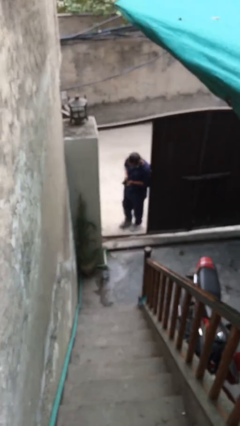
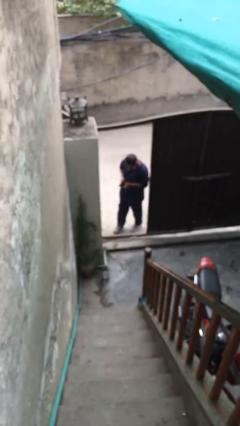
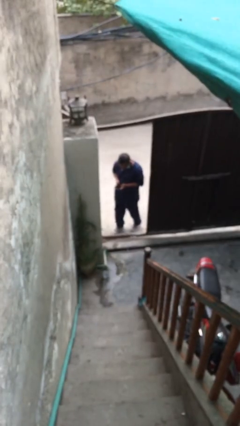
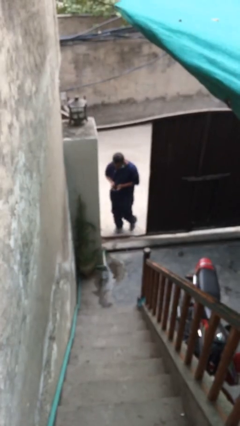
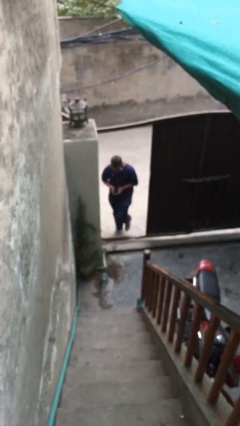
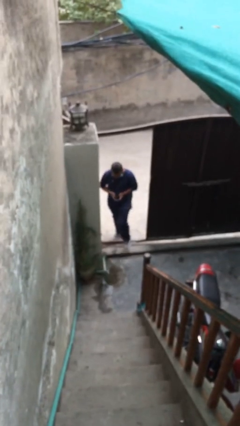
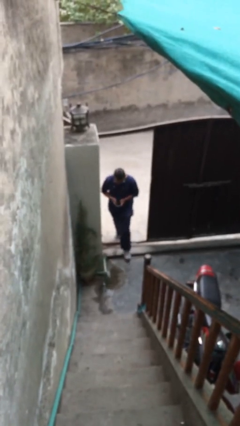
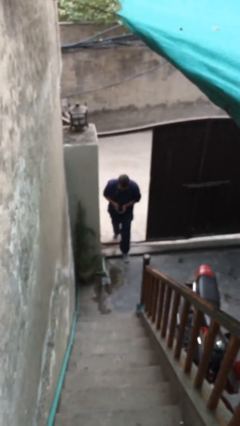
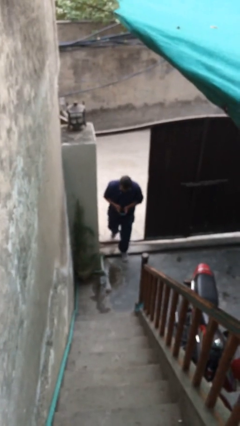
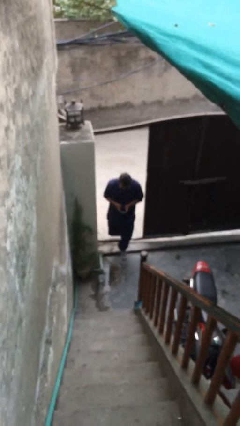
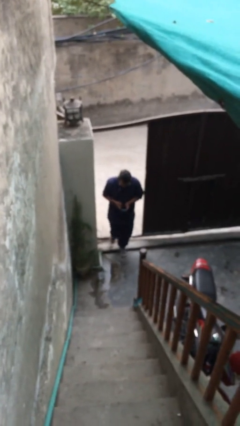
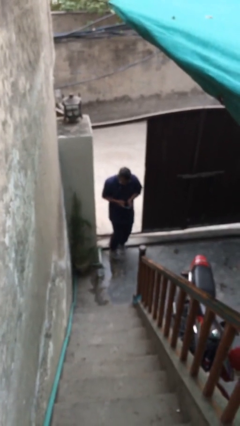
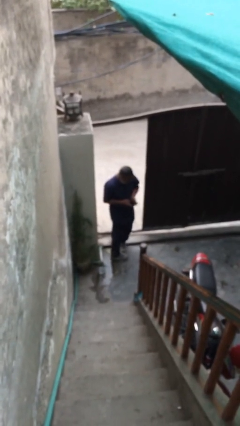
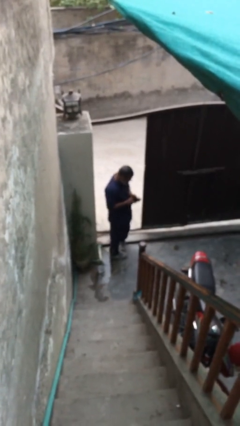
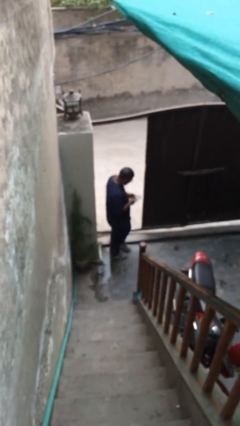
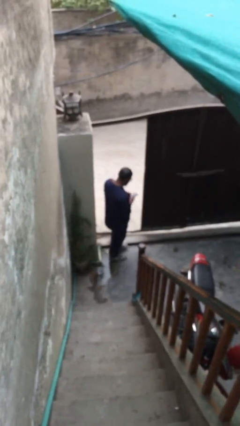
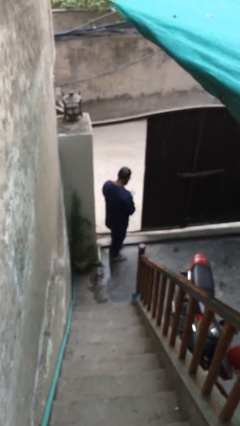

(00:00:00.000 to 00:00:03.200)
person enters scene through structure

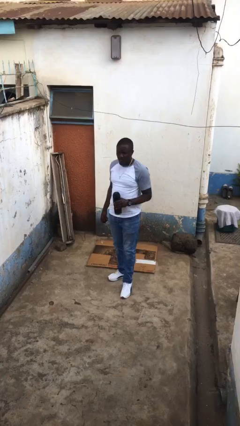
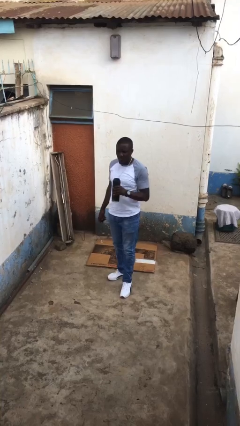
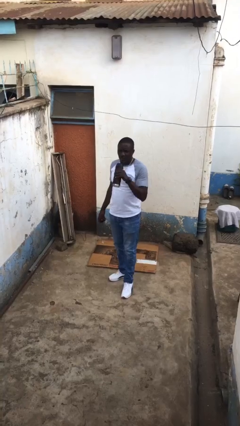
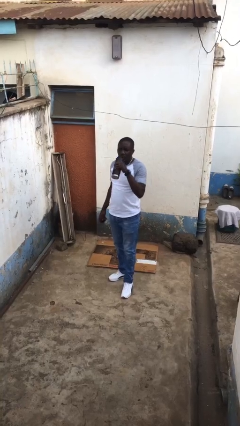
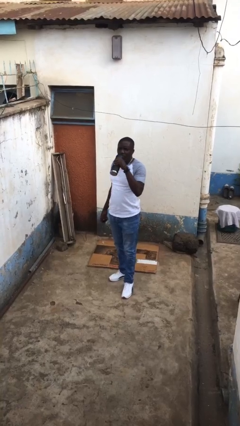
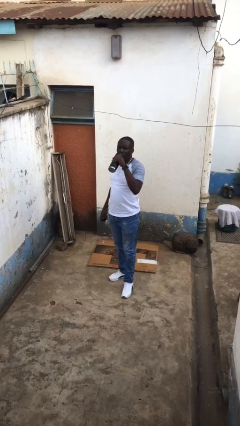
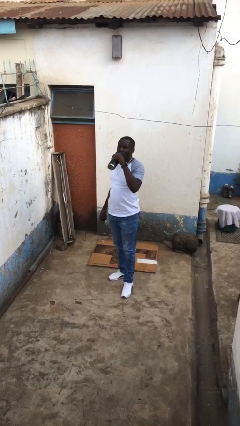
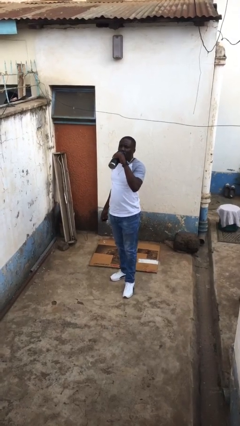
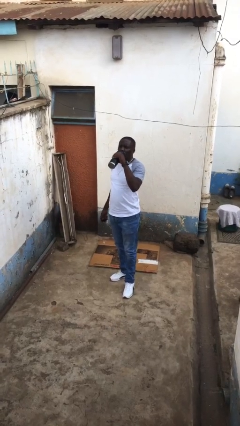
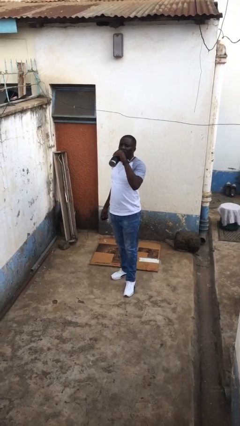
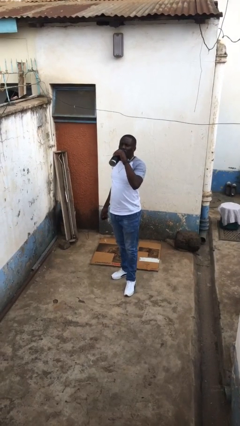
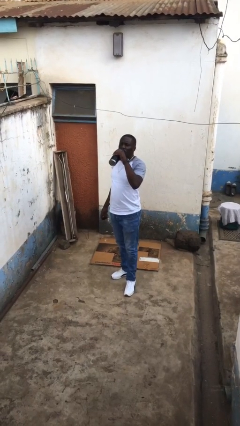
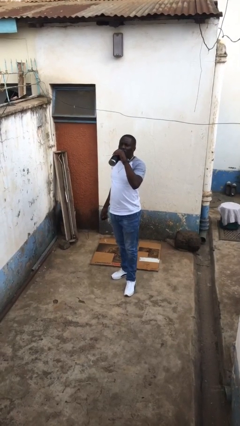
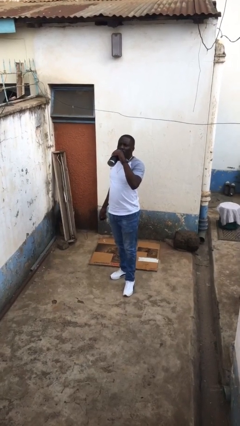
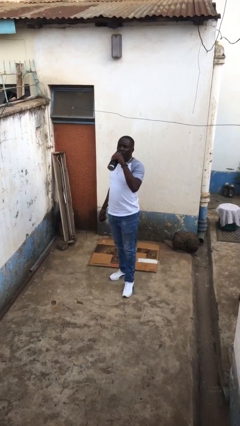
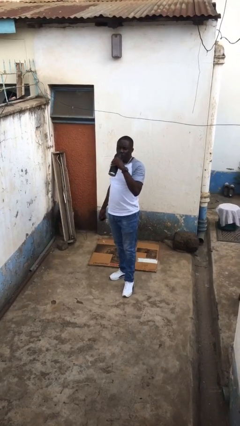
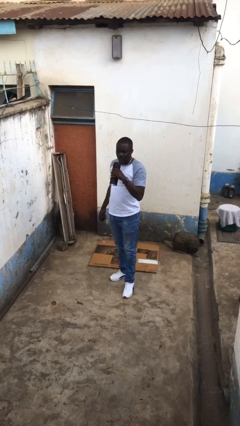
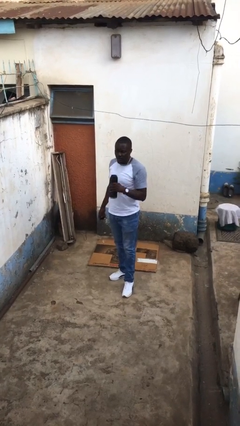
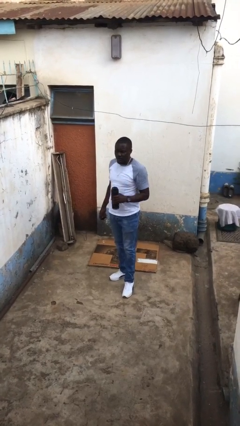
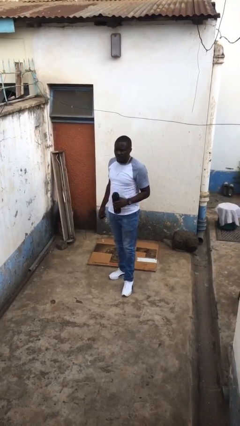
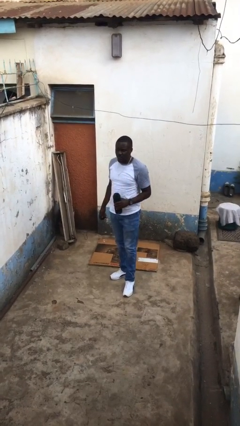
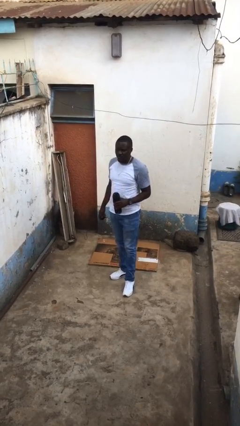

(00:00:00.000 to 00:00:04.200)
person drinks from bottle

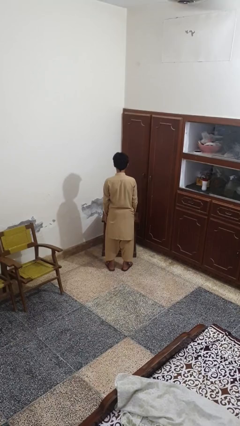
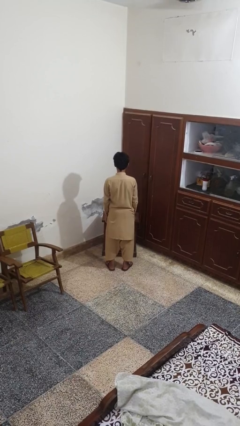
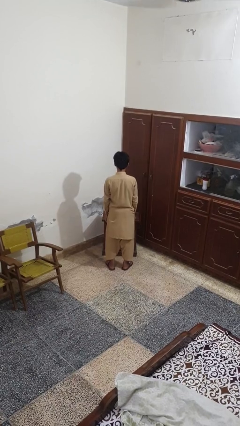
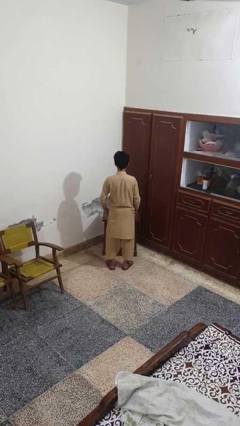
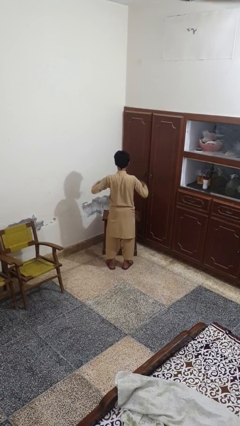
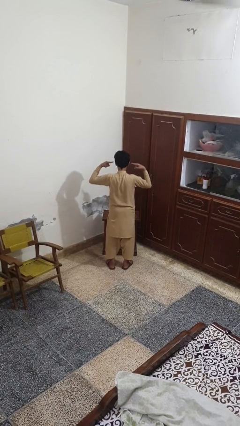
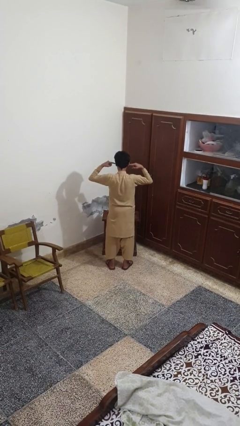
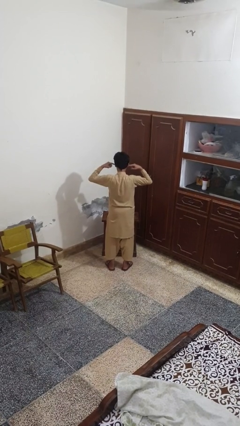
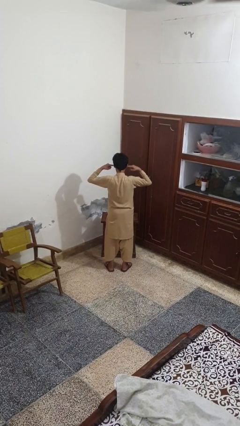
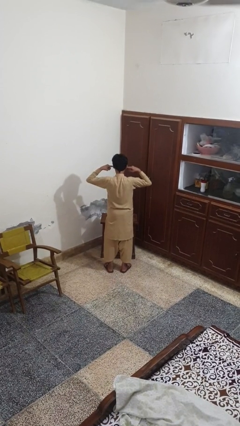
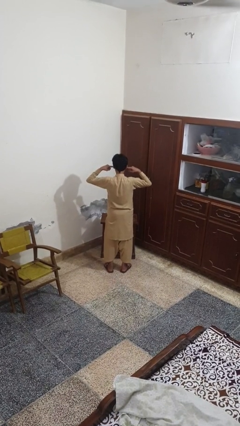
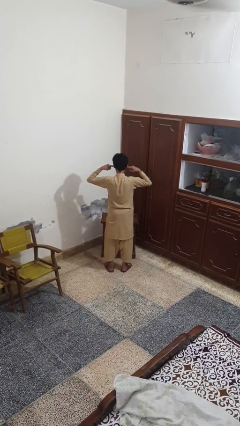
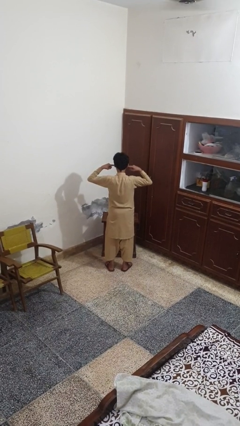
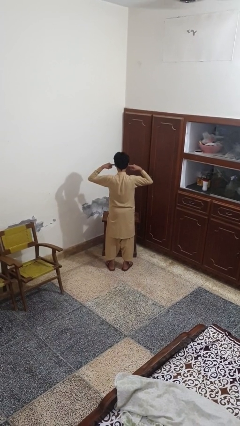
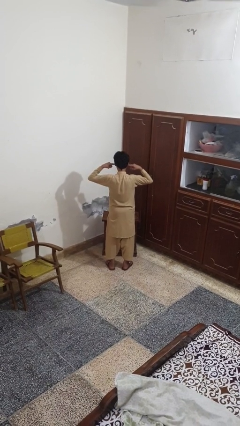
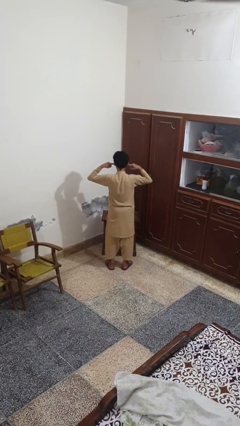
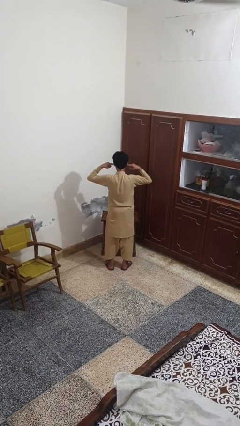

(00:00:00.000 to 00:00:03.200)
person puts fingers in ear

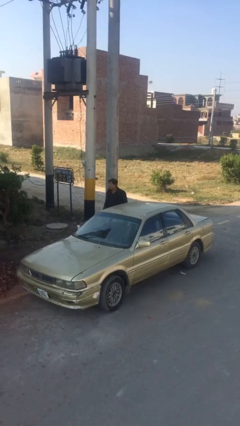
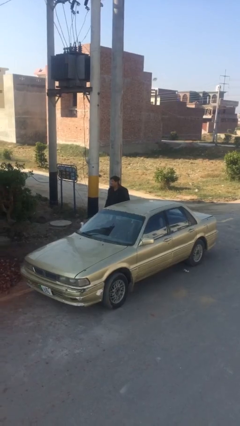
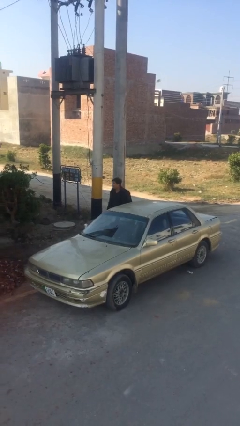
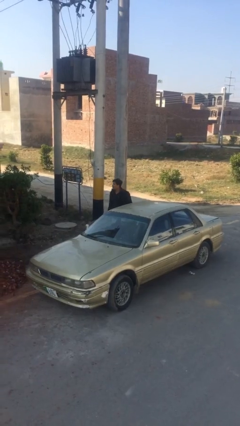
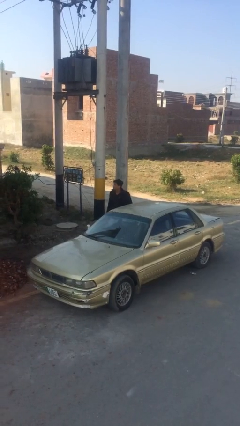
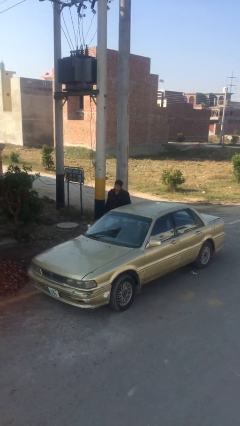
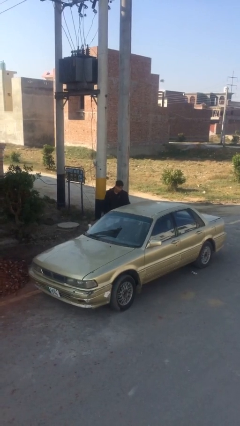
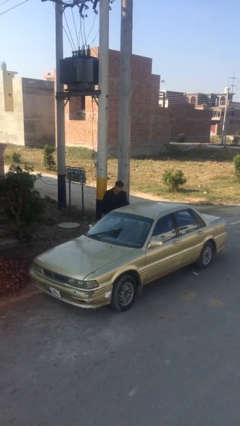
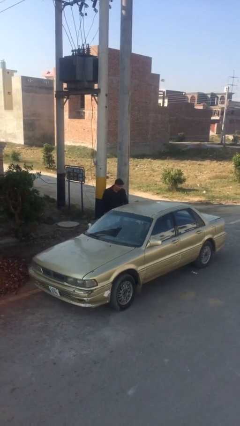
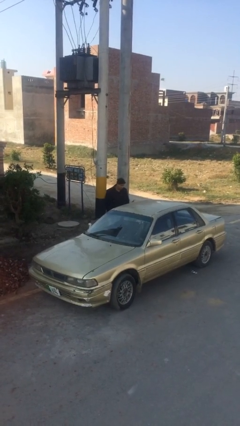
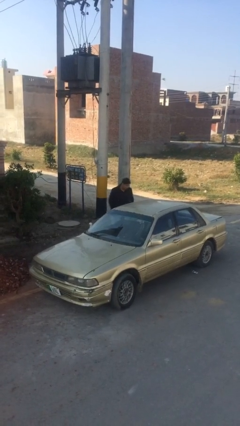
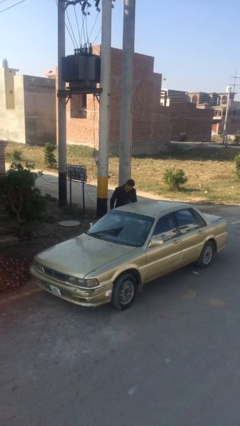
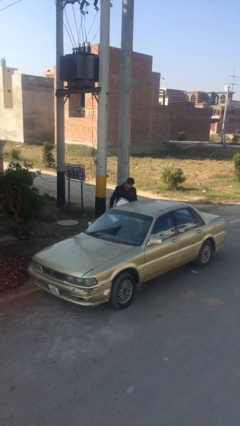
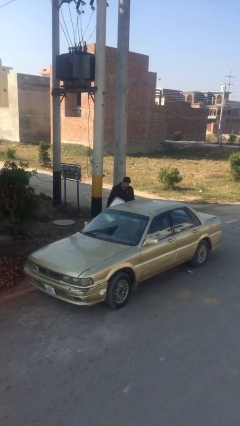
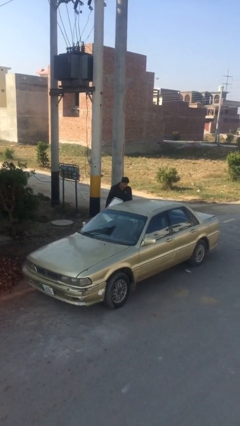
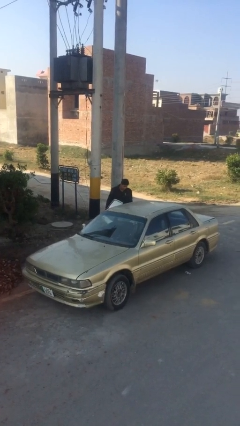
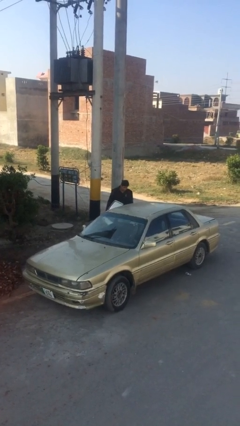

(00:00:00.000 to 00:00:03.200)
person opens car door

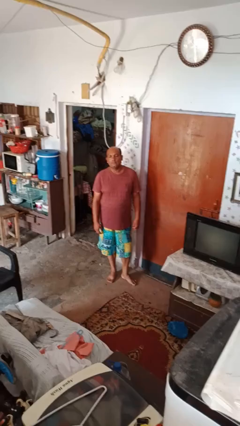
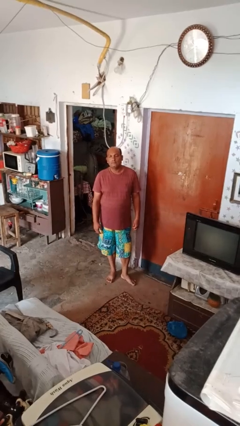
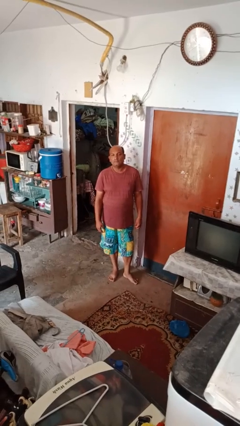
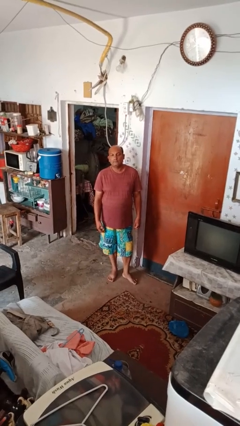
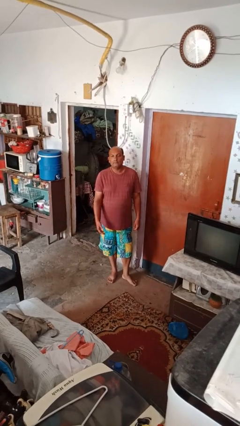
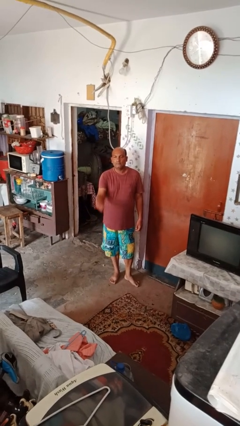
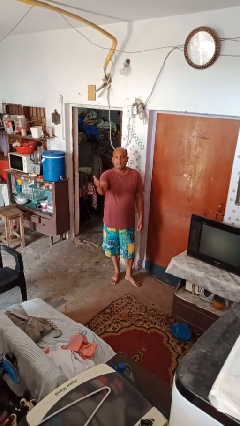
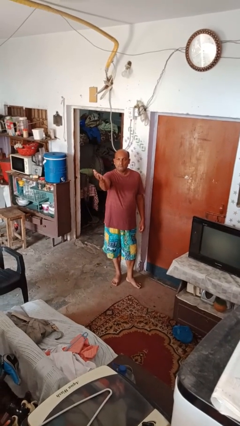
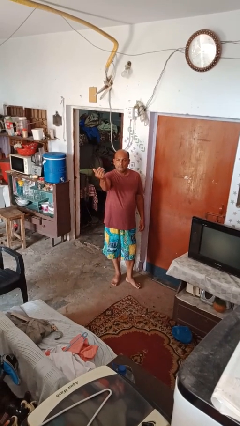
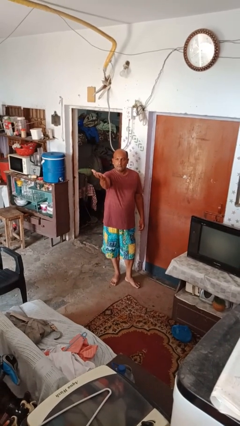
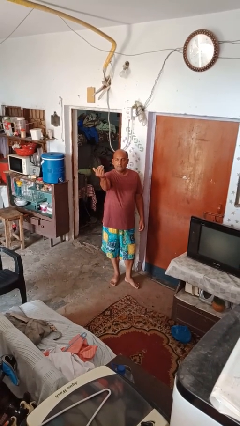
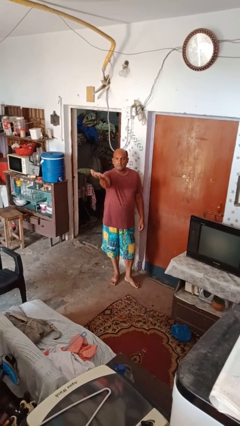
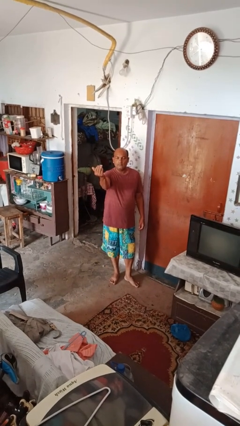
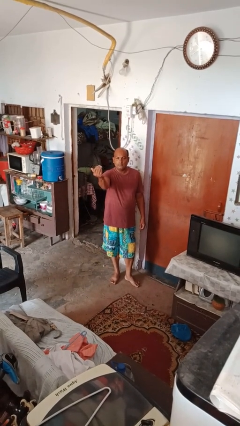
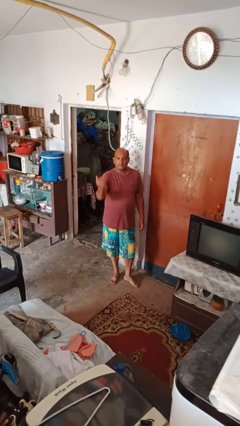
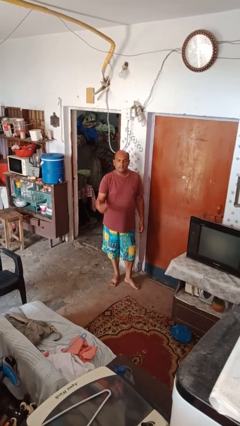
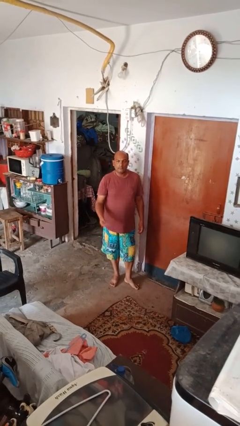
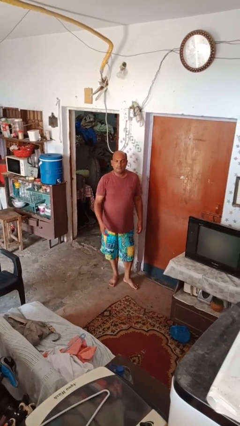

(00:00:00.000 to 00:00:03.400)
person gestures come here
